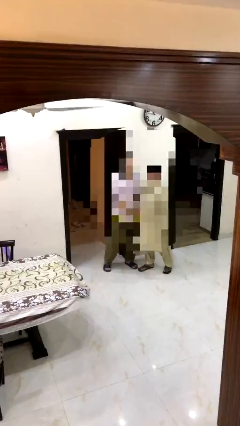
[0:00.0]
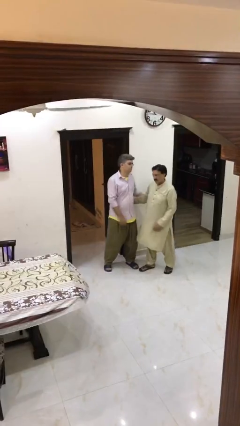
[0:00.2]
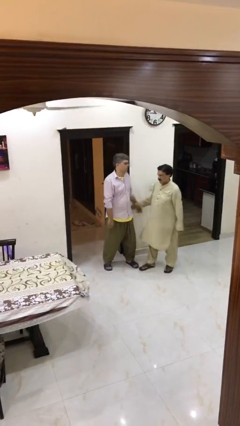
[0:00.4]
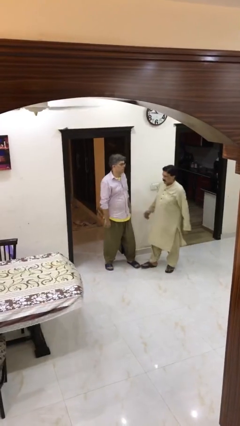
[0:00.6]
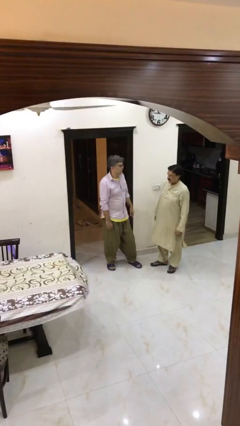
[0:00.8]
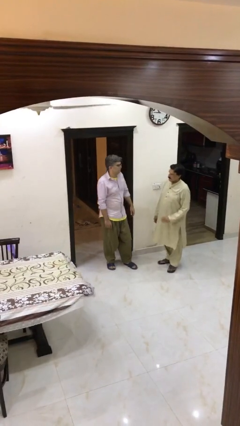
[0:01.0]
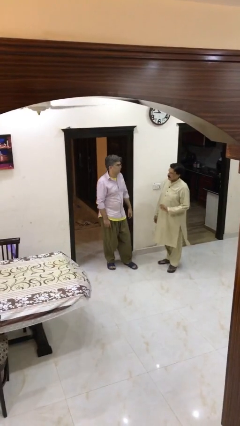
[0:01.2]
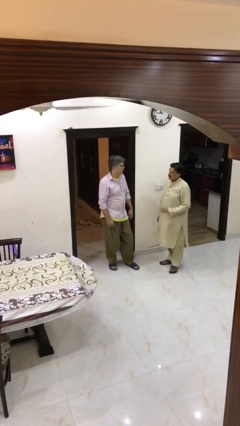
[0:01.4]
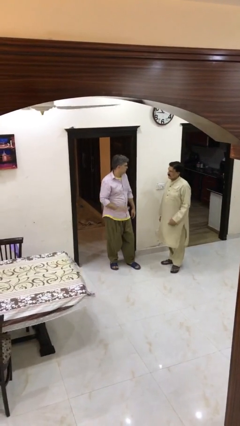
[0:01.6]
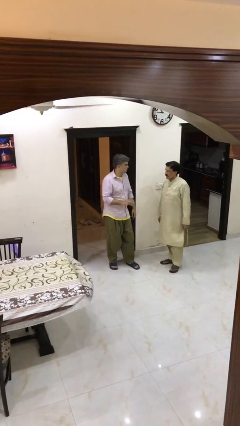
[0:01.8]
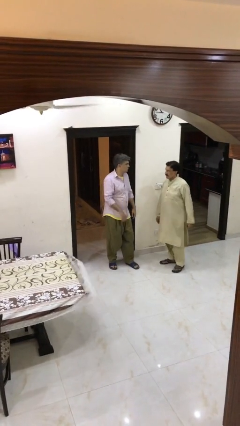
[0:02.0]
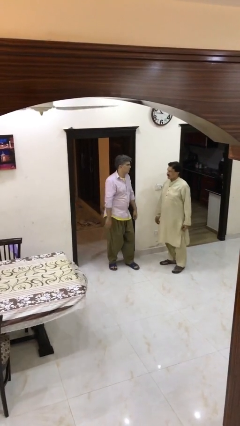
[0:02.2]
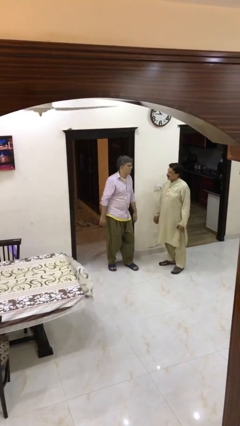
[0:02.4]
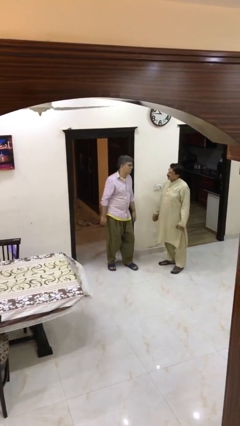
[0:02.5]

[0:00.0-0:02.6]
person talks to person

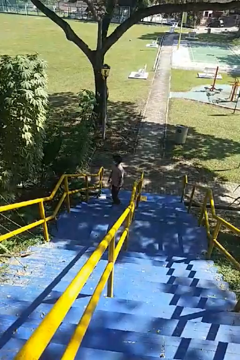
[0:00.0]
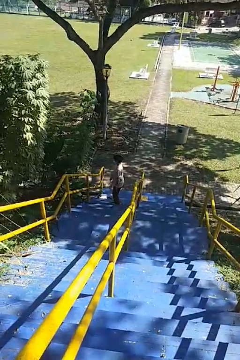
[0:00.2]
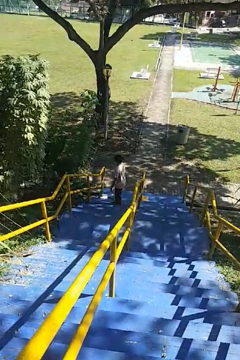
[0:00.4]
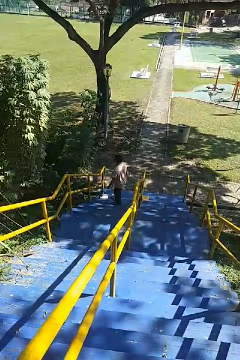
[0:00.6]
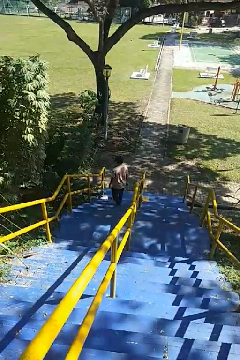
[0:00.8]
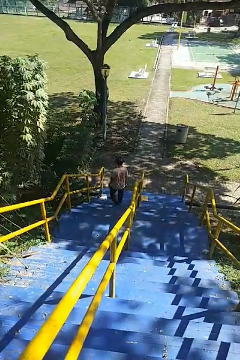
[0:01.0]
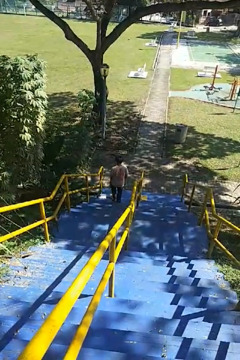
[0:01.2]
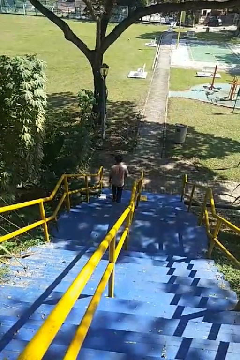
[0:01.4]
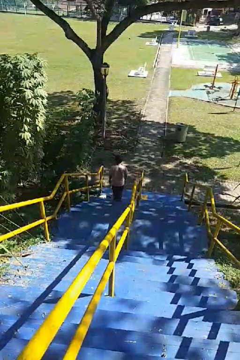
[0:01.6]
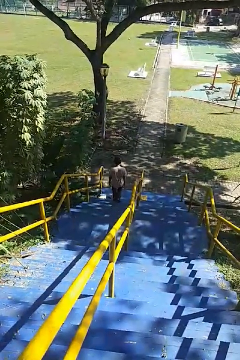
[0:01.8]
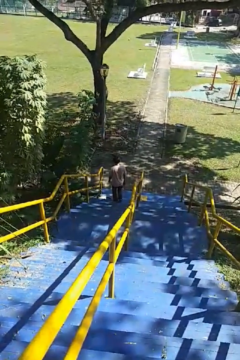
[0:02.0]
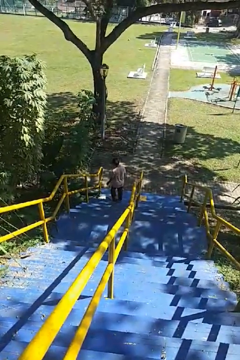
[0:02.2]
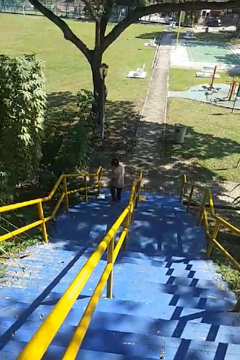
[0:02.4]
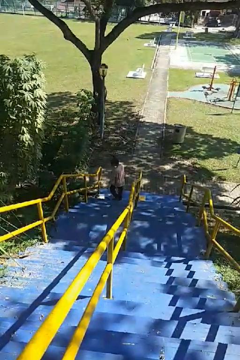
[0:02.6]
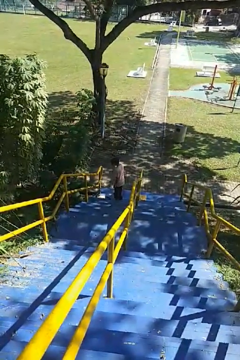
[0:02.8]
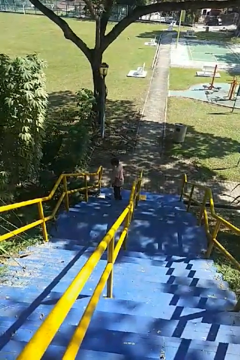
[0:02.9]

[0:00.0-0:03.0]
person climbs down stairs

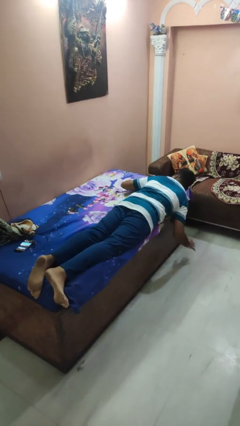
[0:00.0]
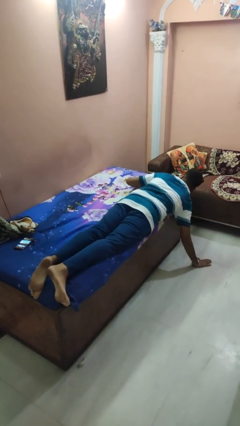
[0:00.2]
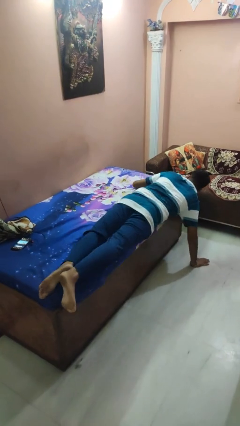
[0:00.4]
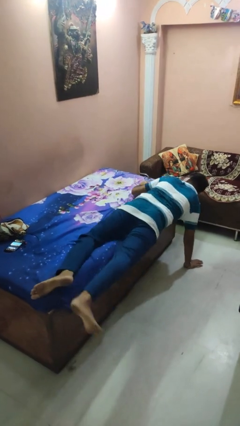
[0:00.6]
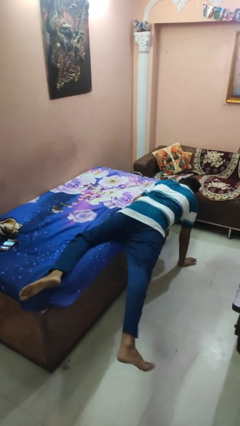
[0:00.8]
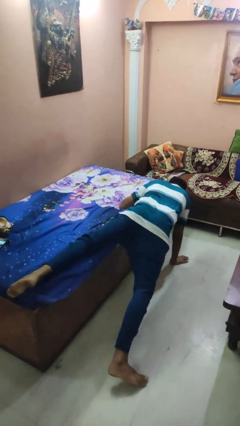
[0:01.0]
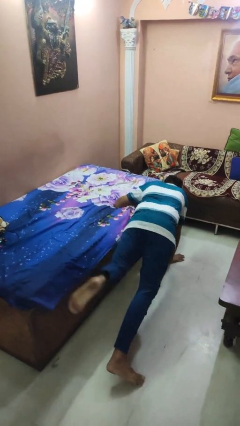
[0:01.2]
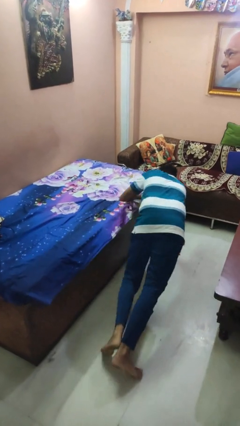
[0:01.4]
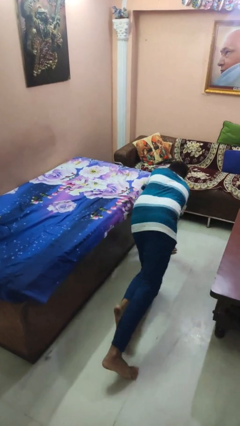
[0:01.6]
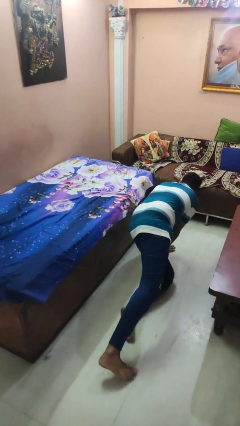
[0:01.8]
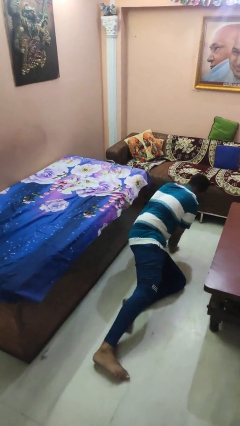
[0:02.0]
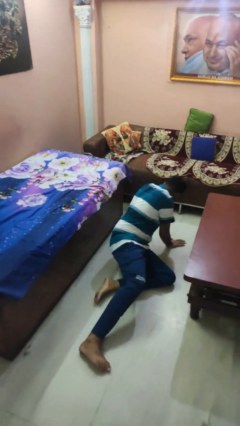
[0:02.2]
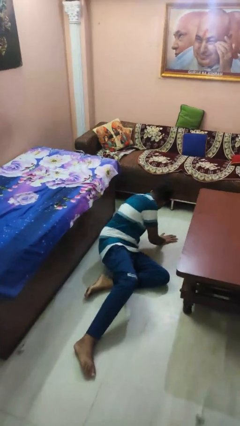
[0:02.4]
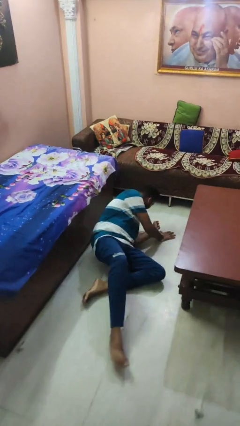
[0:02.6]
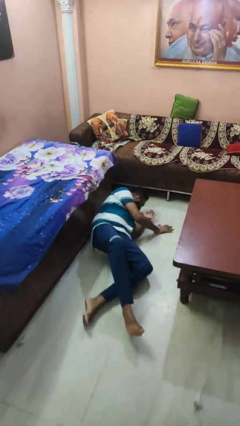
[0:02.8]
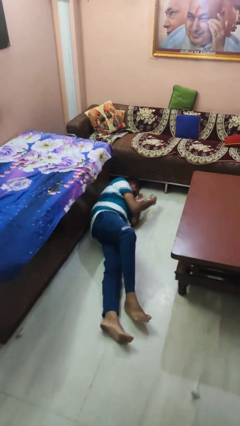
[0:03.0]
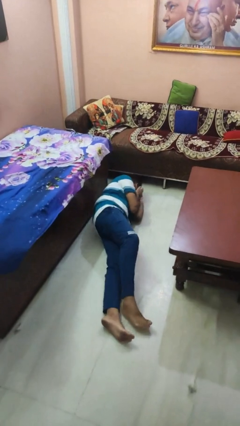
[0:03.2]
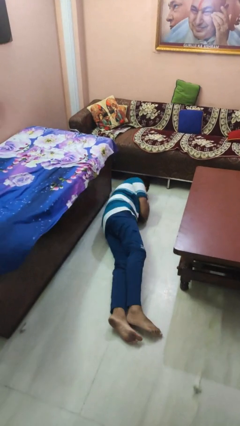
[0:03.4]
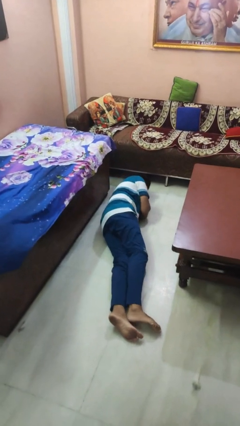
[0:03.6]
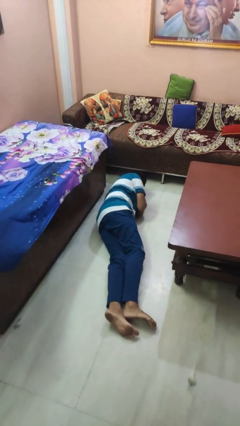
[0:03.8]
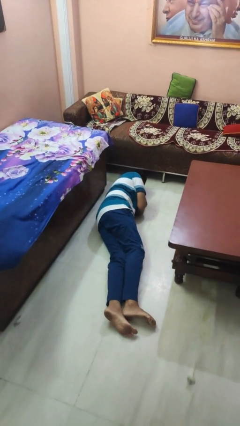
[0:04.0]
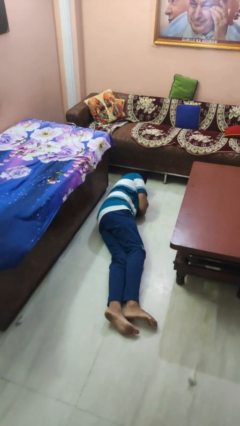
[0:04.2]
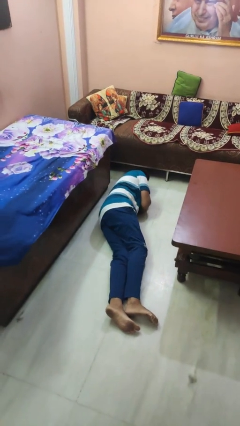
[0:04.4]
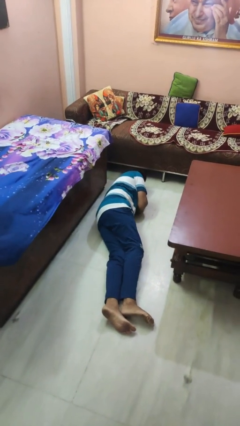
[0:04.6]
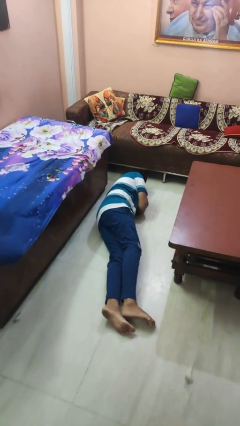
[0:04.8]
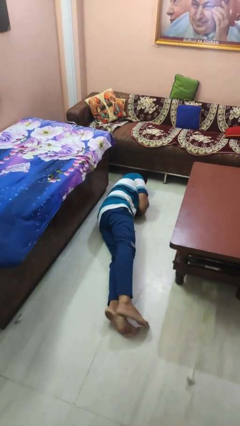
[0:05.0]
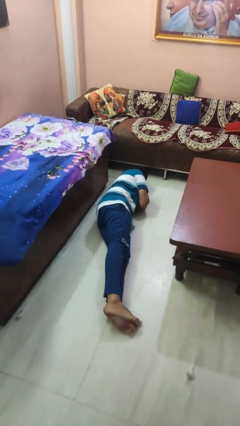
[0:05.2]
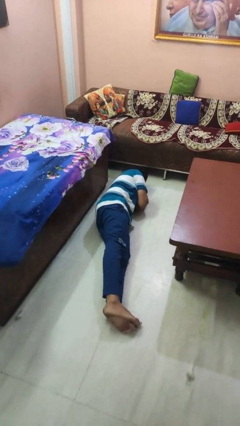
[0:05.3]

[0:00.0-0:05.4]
person falls from bed

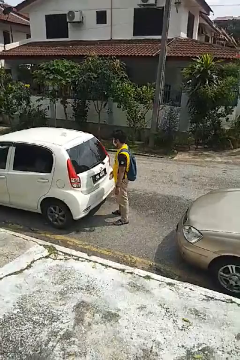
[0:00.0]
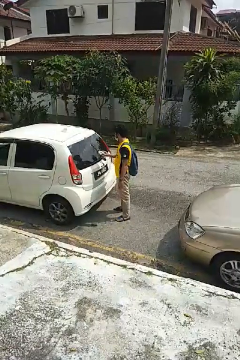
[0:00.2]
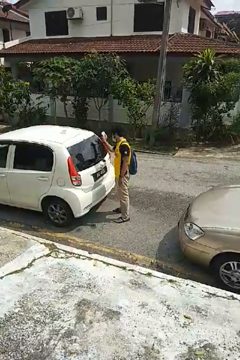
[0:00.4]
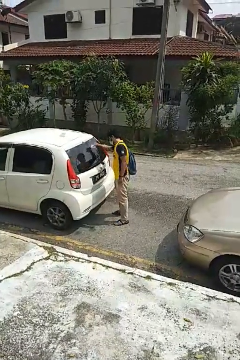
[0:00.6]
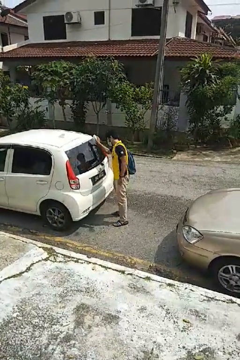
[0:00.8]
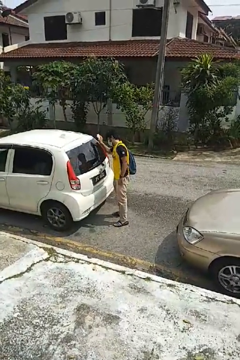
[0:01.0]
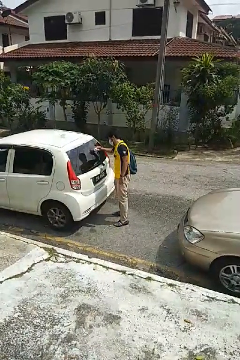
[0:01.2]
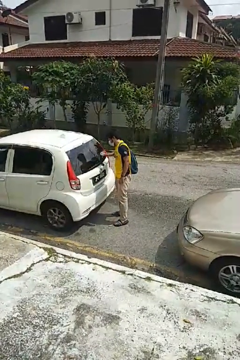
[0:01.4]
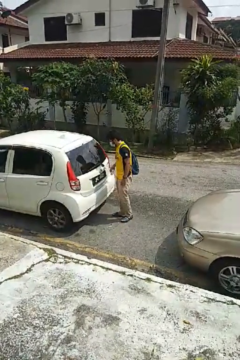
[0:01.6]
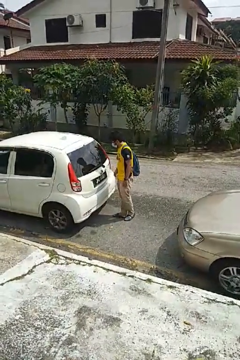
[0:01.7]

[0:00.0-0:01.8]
person polishes car with rag

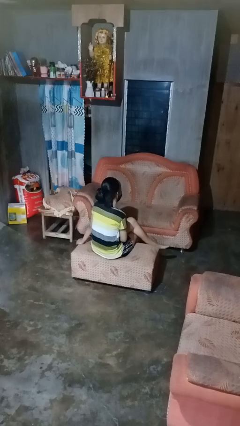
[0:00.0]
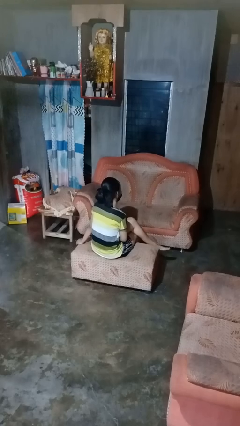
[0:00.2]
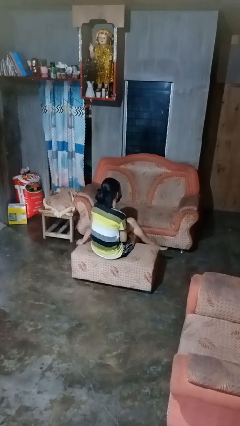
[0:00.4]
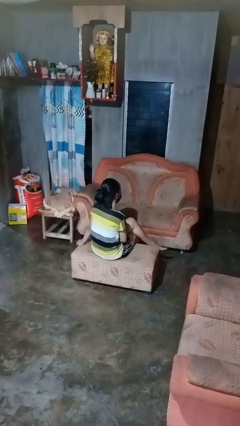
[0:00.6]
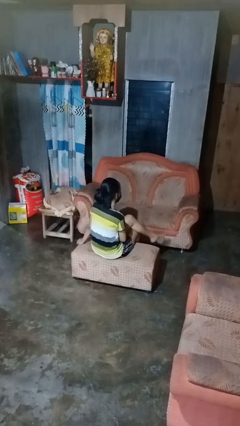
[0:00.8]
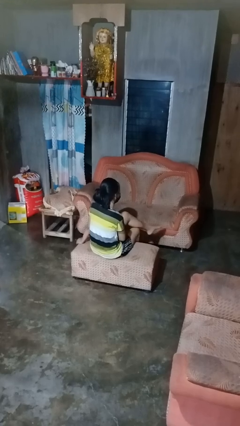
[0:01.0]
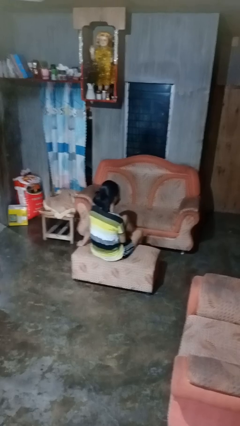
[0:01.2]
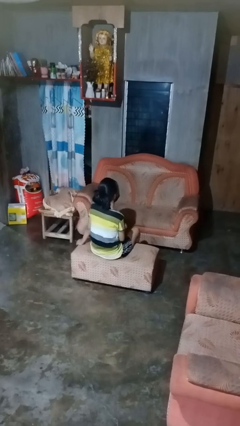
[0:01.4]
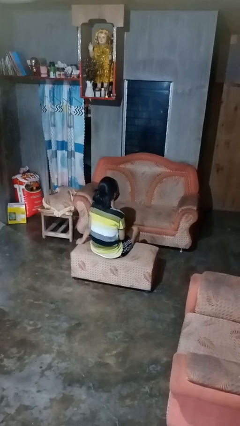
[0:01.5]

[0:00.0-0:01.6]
person crosses legs

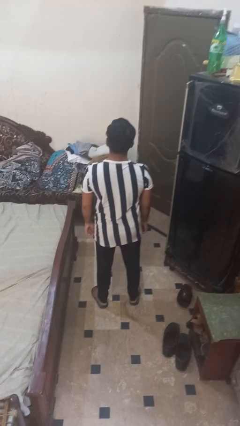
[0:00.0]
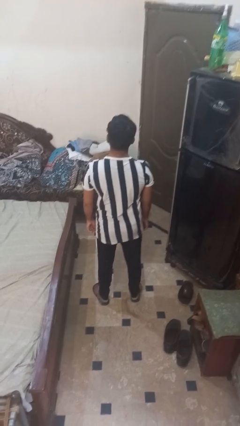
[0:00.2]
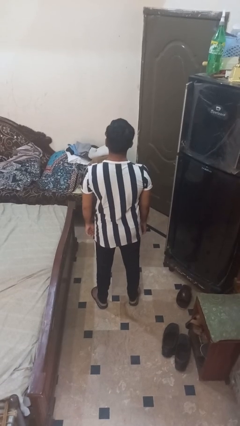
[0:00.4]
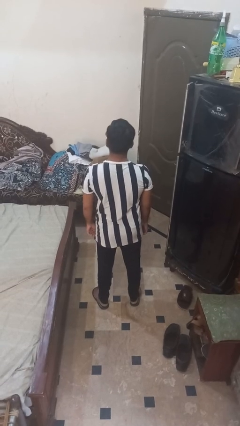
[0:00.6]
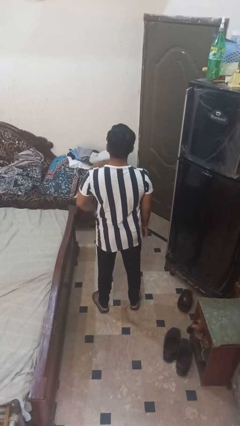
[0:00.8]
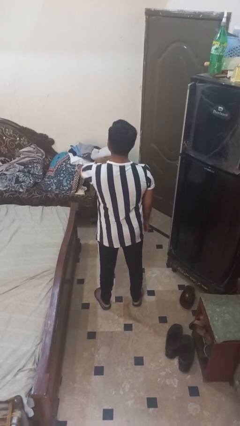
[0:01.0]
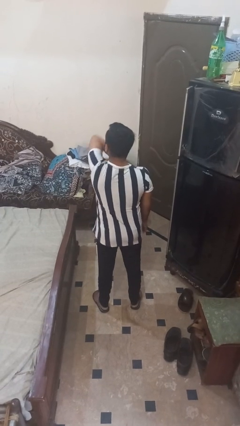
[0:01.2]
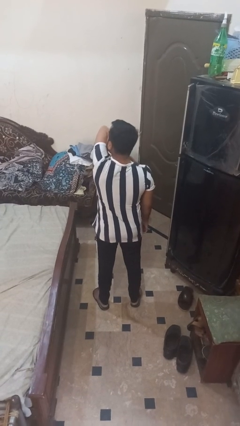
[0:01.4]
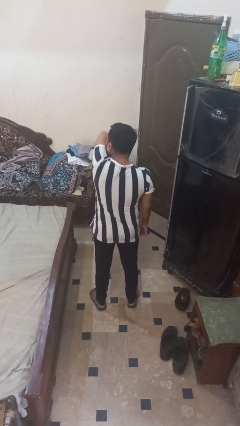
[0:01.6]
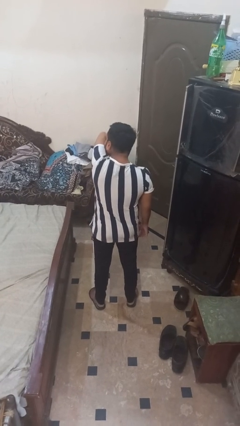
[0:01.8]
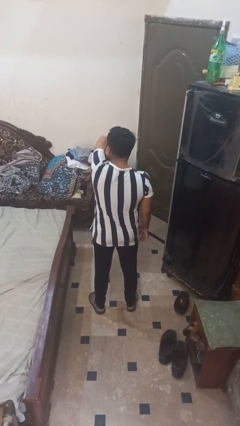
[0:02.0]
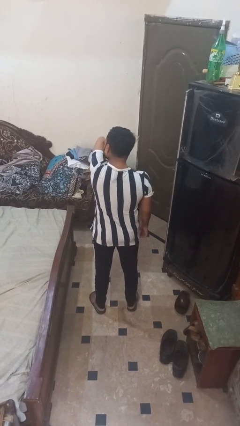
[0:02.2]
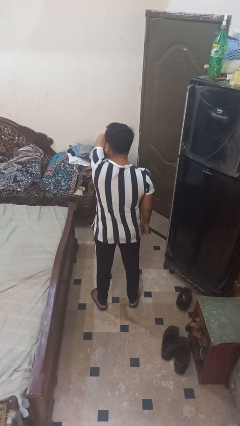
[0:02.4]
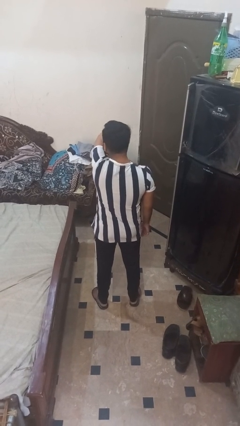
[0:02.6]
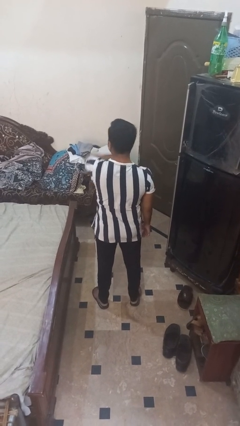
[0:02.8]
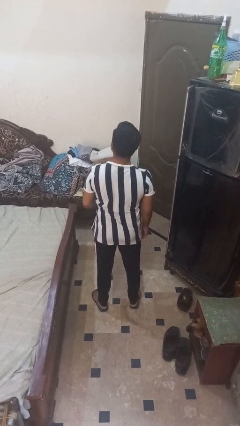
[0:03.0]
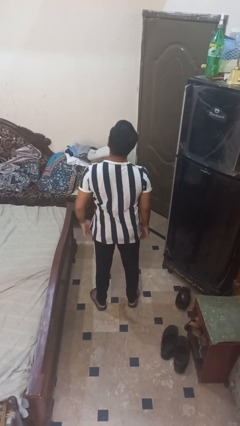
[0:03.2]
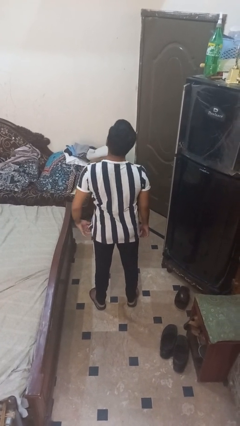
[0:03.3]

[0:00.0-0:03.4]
person sneezes into arm

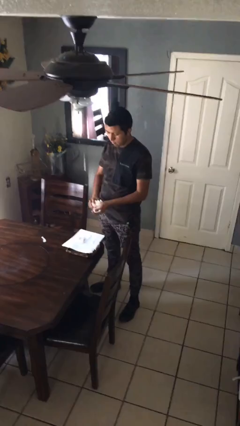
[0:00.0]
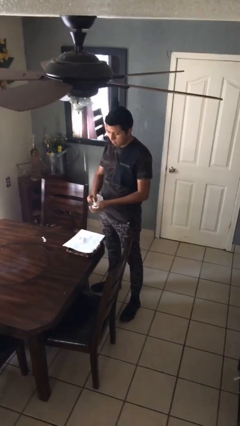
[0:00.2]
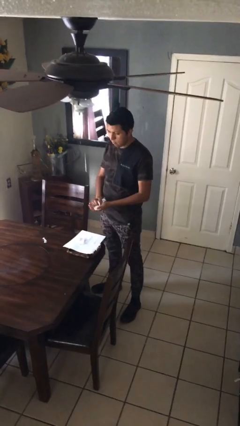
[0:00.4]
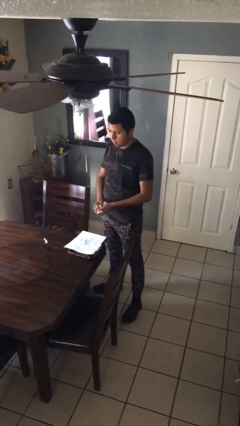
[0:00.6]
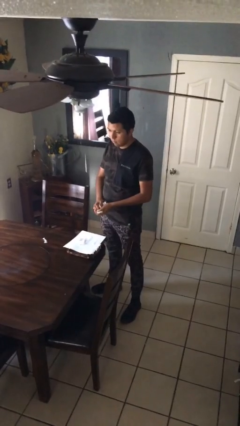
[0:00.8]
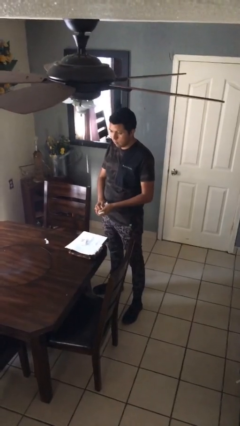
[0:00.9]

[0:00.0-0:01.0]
person crumples paper
